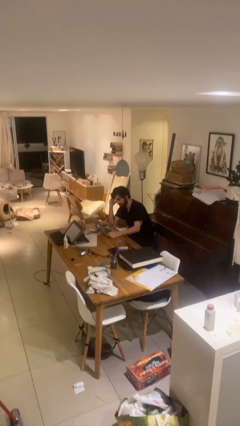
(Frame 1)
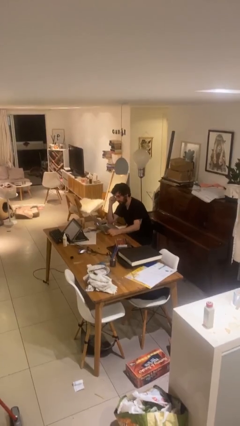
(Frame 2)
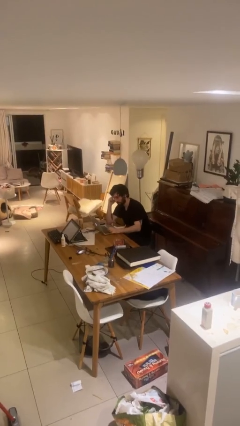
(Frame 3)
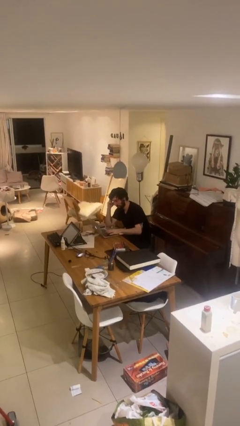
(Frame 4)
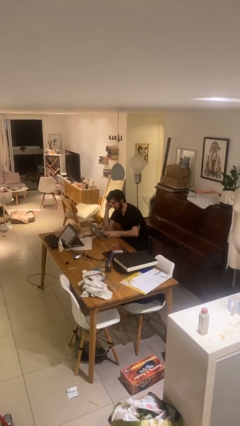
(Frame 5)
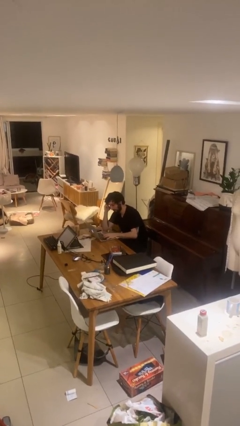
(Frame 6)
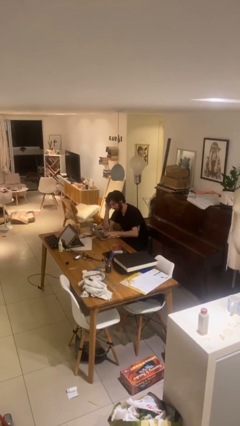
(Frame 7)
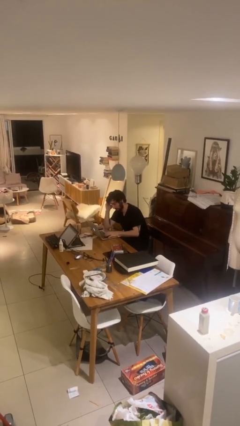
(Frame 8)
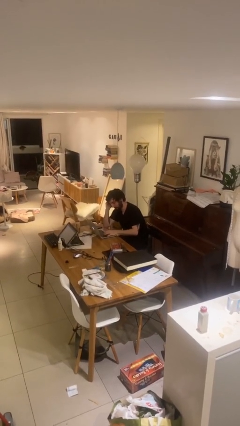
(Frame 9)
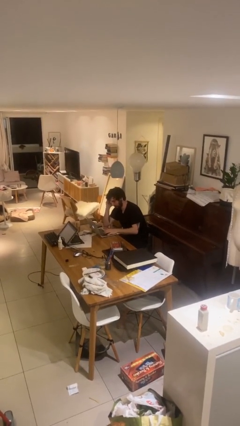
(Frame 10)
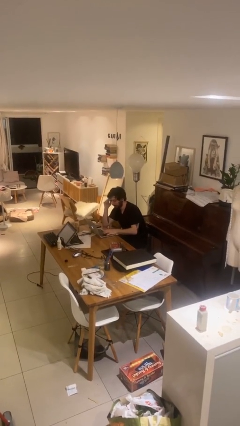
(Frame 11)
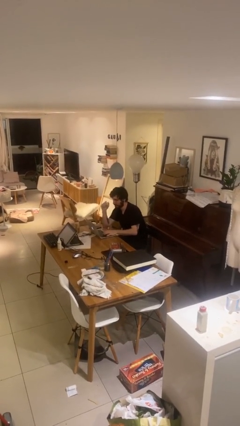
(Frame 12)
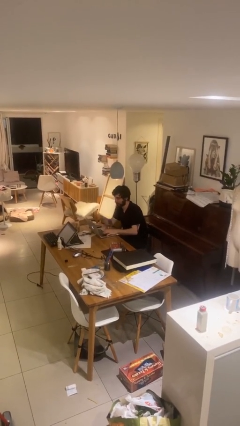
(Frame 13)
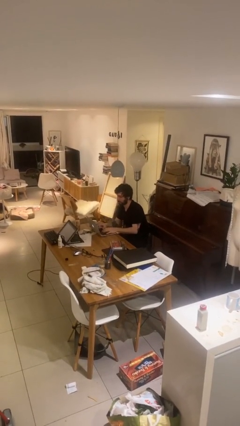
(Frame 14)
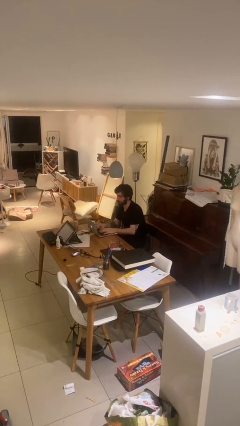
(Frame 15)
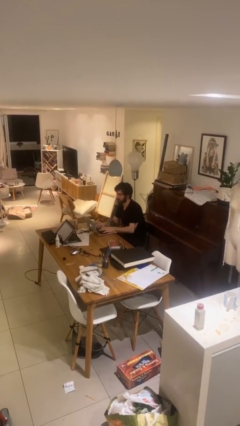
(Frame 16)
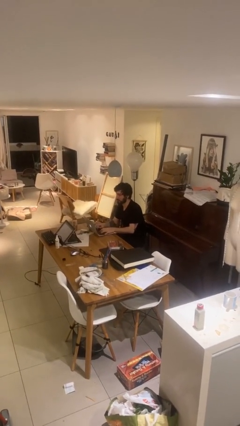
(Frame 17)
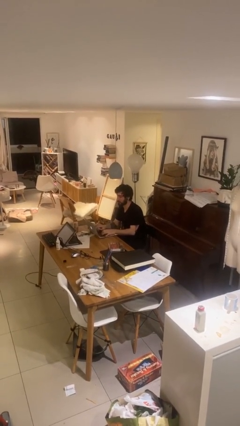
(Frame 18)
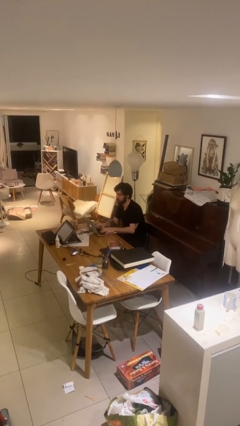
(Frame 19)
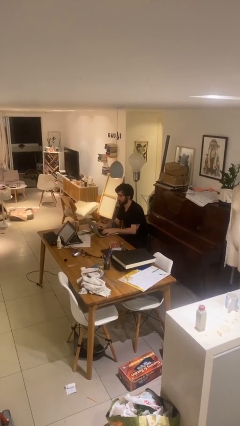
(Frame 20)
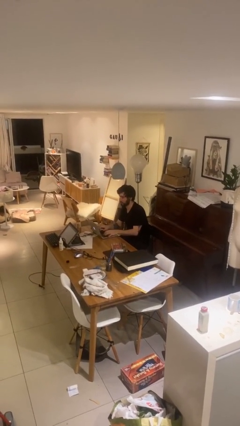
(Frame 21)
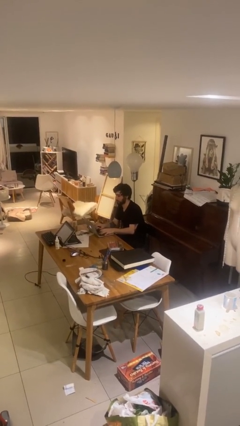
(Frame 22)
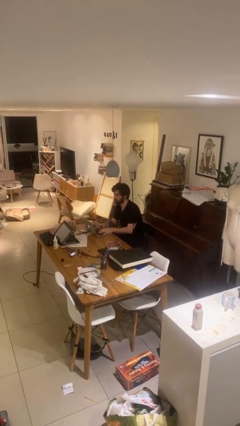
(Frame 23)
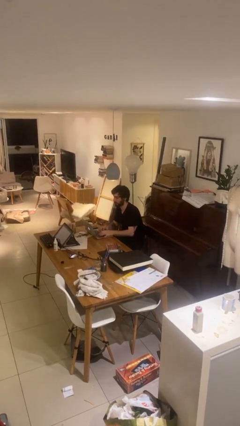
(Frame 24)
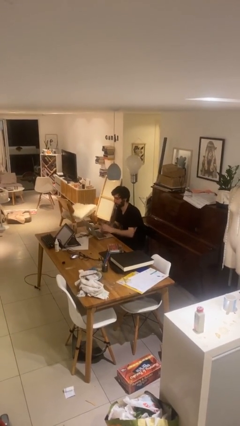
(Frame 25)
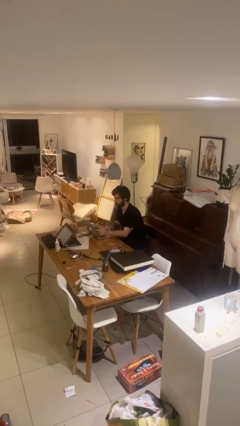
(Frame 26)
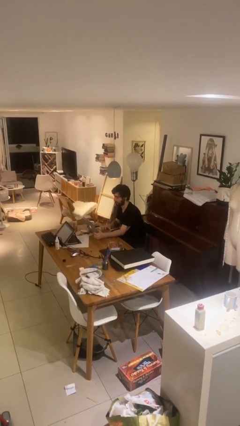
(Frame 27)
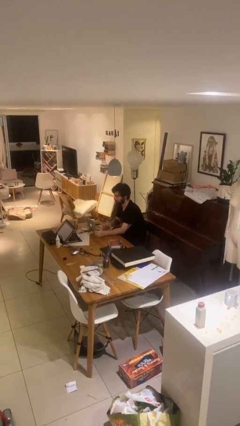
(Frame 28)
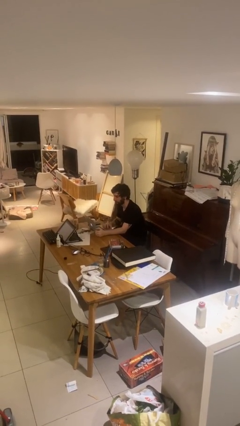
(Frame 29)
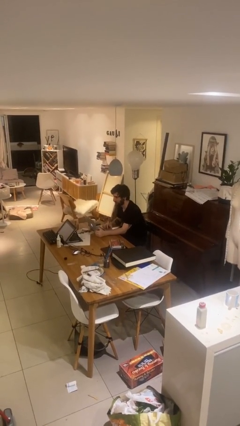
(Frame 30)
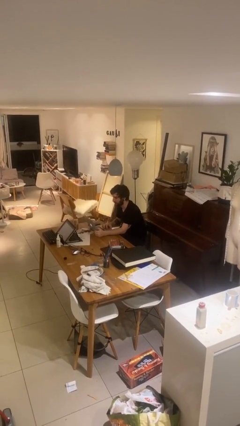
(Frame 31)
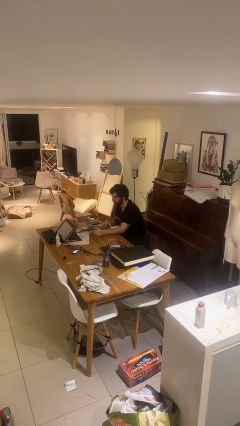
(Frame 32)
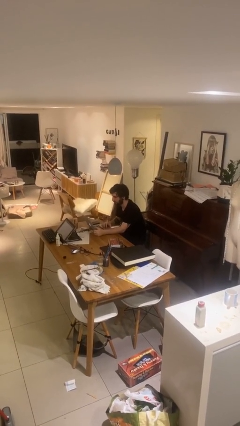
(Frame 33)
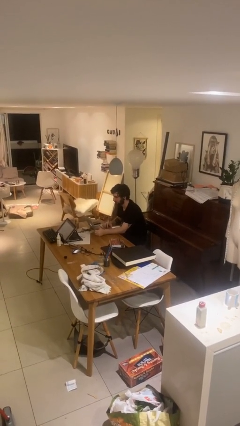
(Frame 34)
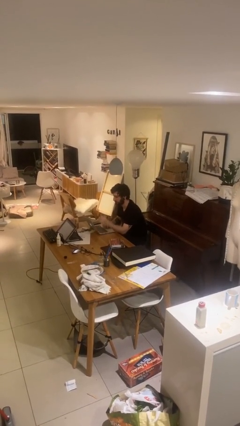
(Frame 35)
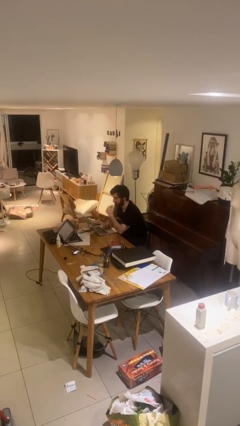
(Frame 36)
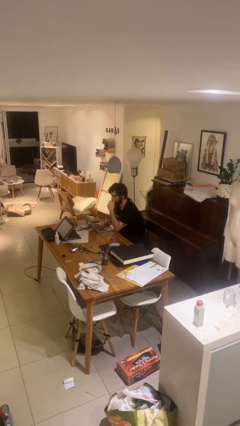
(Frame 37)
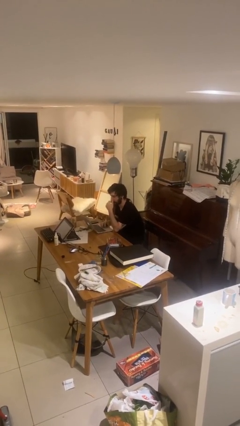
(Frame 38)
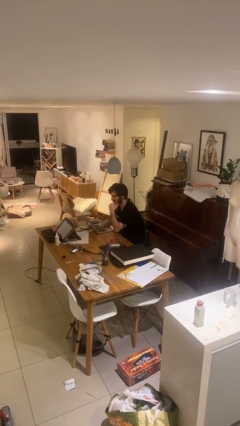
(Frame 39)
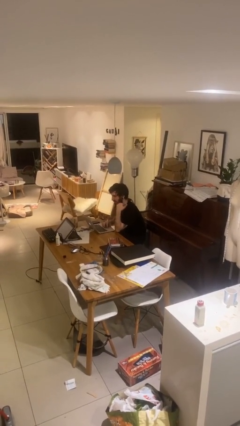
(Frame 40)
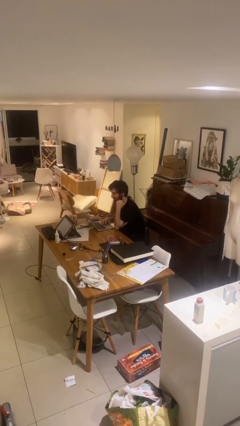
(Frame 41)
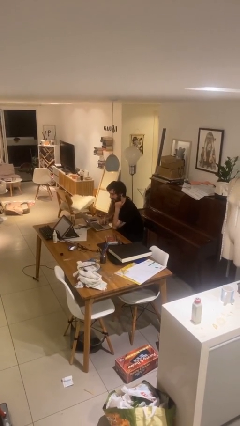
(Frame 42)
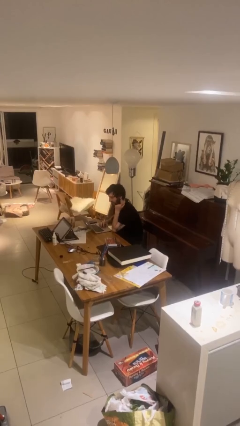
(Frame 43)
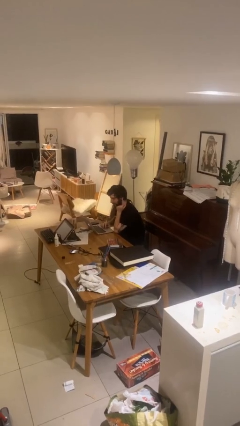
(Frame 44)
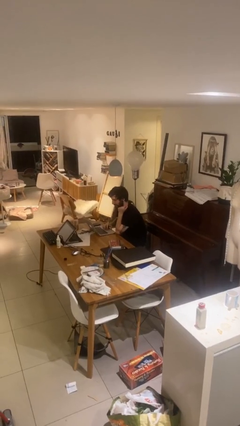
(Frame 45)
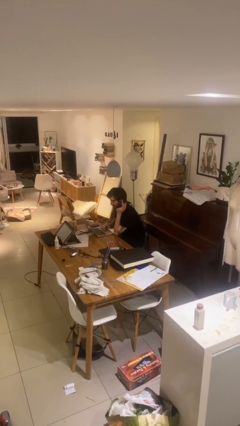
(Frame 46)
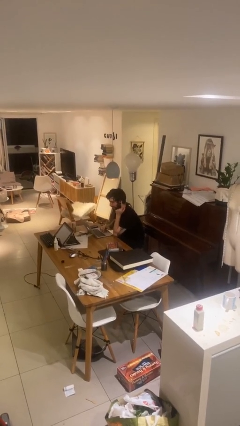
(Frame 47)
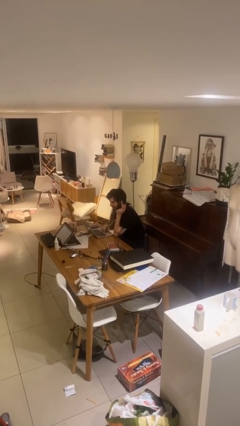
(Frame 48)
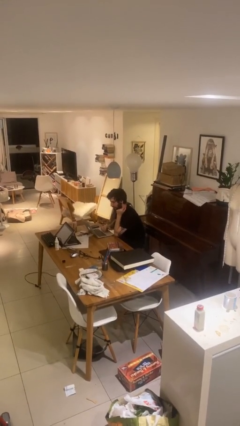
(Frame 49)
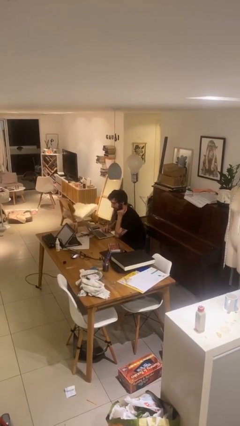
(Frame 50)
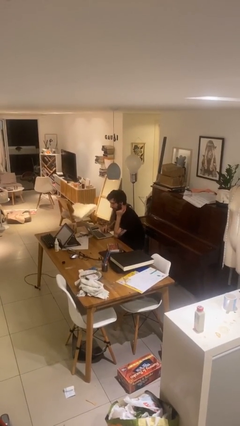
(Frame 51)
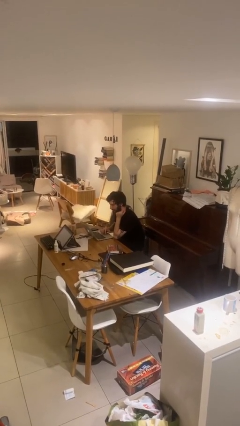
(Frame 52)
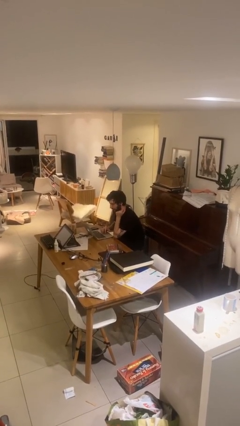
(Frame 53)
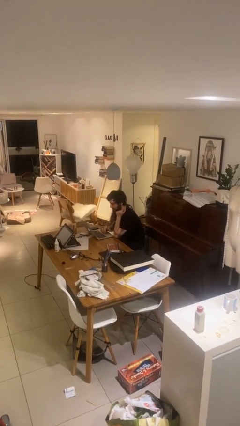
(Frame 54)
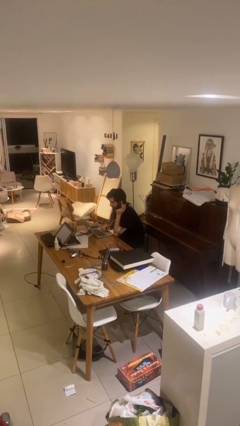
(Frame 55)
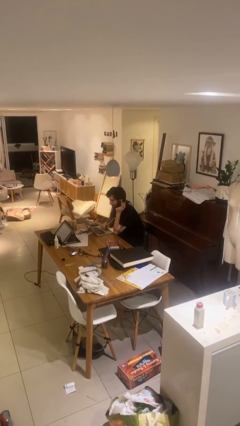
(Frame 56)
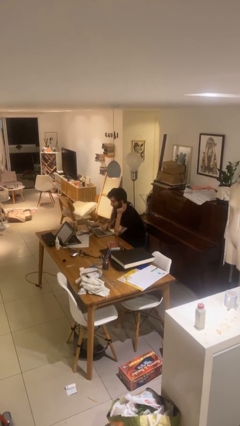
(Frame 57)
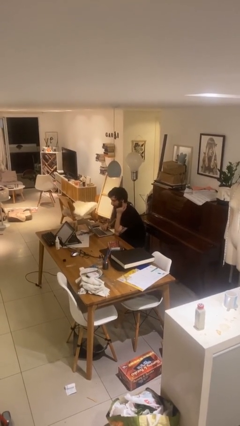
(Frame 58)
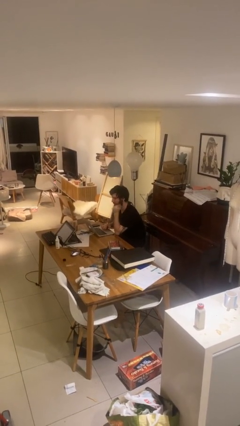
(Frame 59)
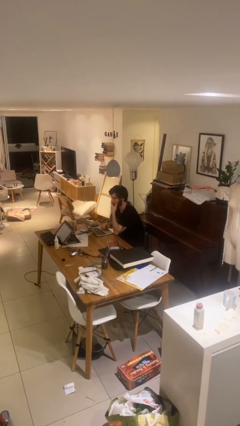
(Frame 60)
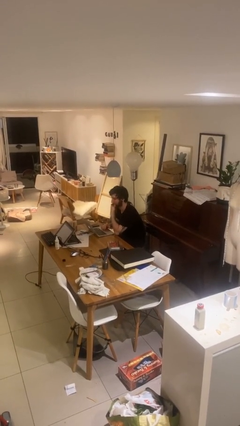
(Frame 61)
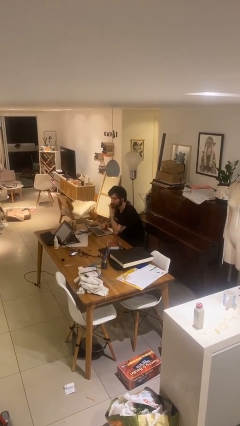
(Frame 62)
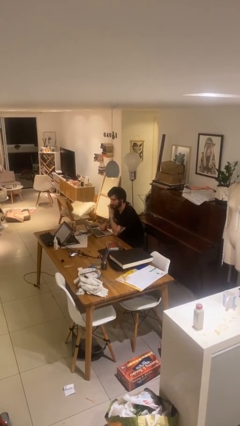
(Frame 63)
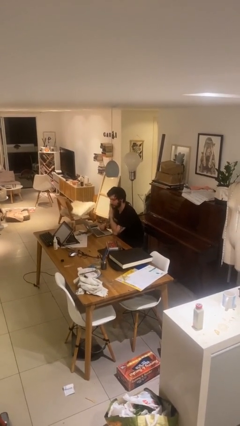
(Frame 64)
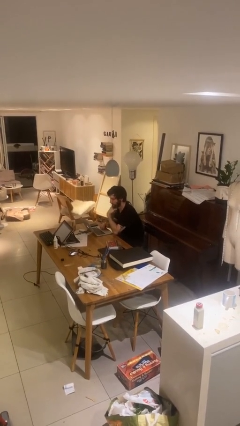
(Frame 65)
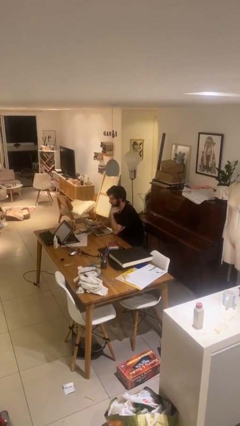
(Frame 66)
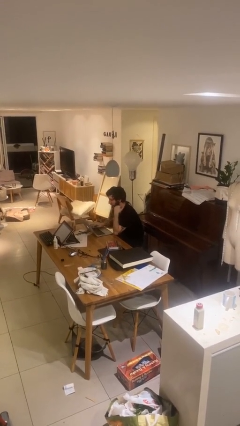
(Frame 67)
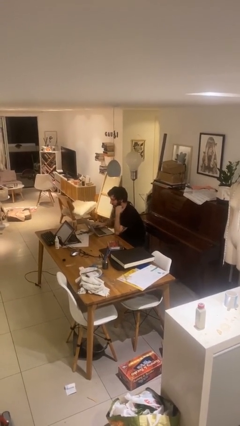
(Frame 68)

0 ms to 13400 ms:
person interacts with laptop

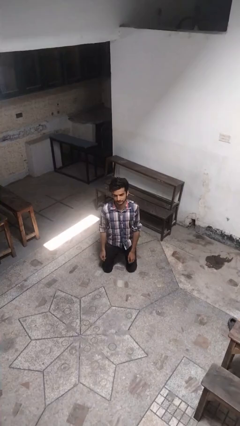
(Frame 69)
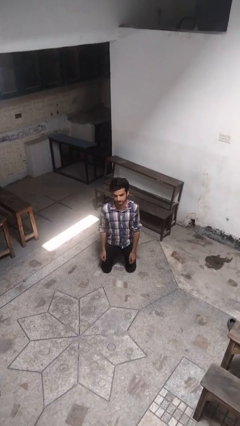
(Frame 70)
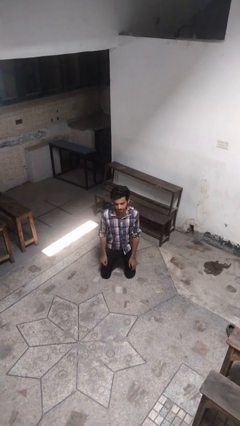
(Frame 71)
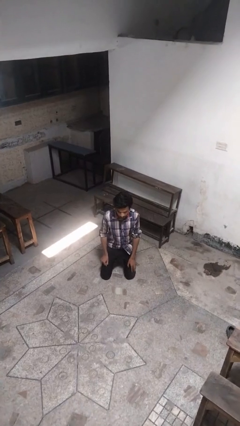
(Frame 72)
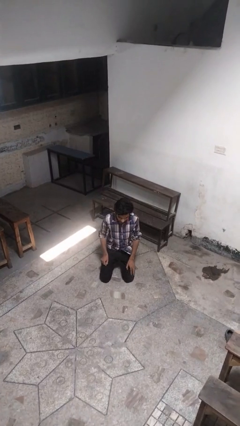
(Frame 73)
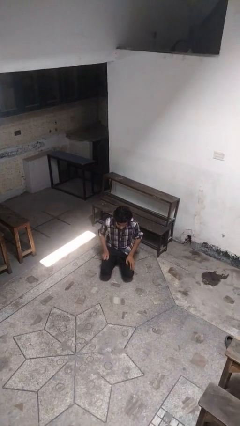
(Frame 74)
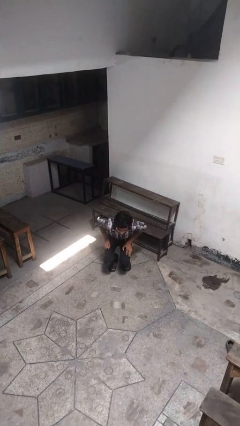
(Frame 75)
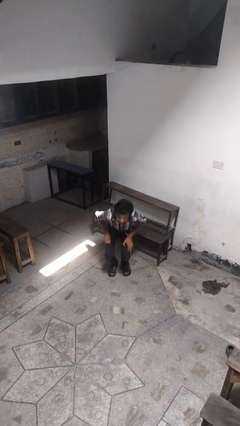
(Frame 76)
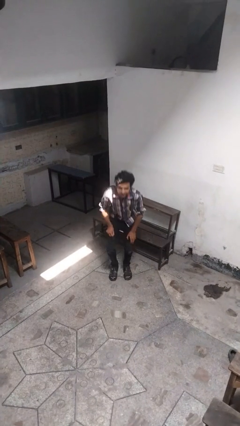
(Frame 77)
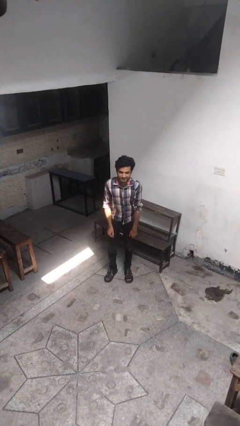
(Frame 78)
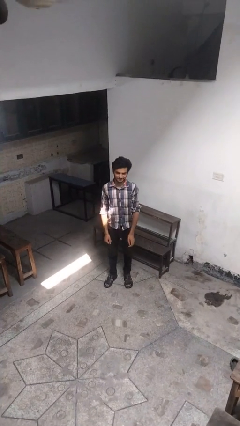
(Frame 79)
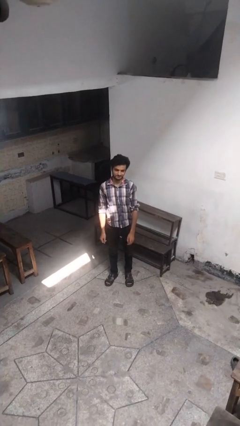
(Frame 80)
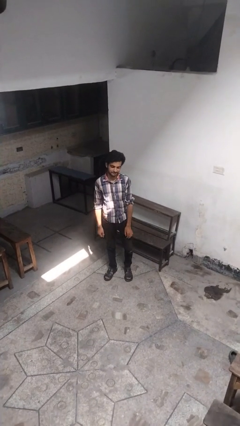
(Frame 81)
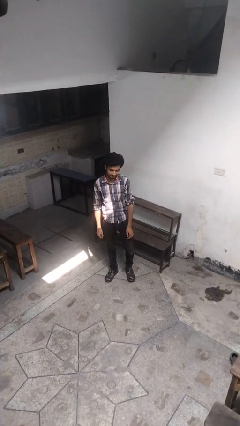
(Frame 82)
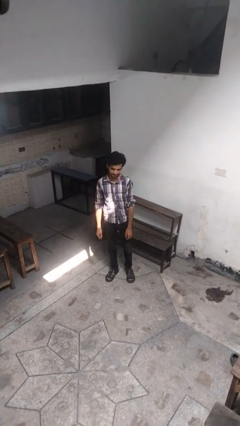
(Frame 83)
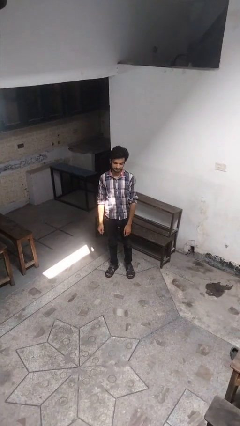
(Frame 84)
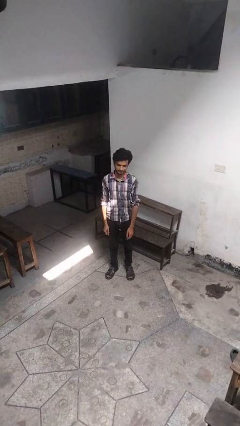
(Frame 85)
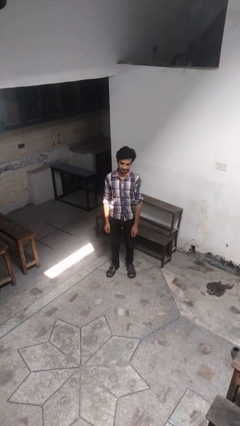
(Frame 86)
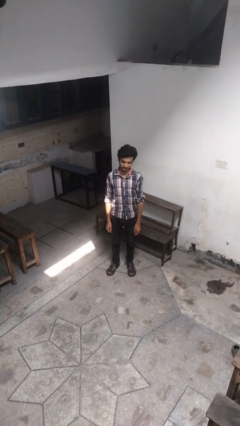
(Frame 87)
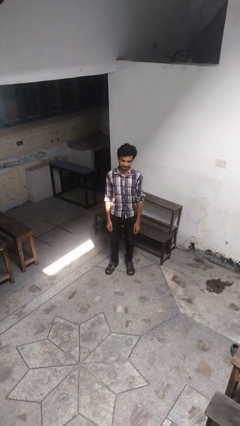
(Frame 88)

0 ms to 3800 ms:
person stands up from floor

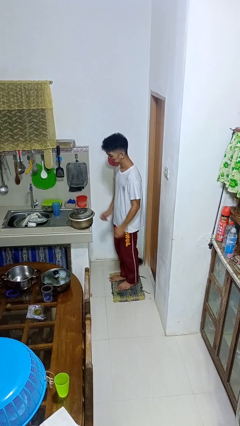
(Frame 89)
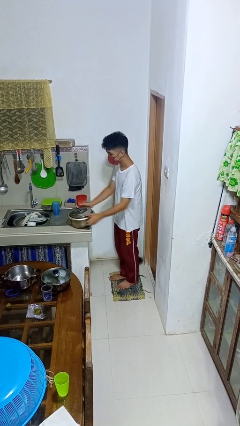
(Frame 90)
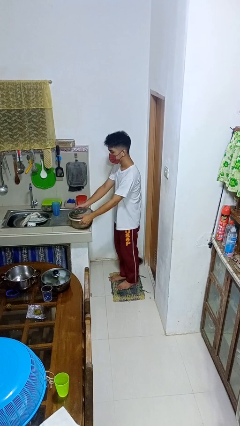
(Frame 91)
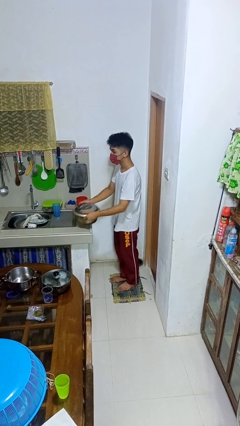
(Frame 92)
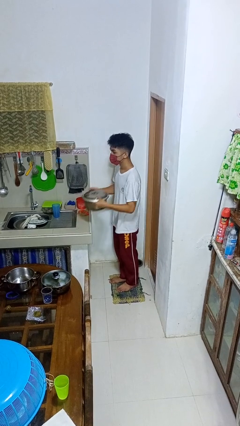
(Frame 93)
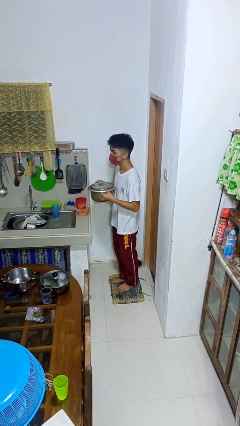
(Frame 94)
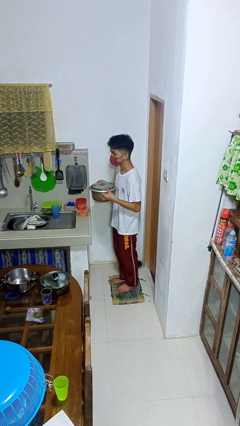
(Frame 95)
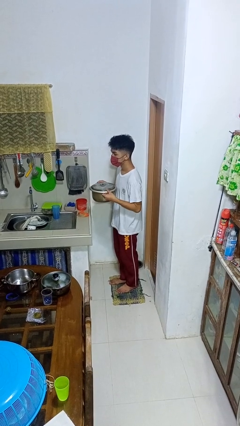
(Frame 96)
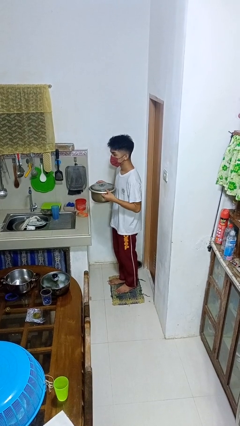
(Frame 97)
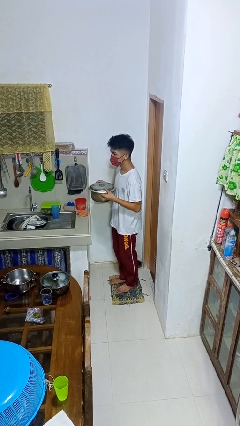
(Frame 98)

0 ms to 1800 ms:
person picks up object from countertop
